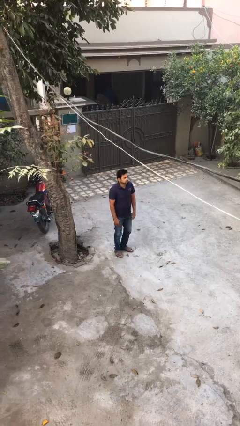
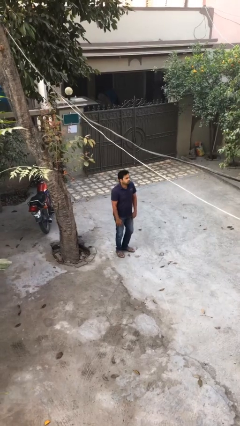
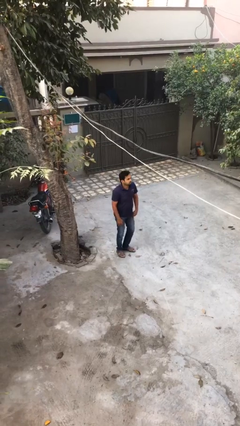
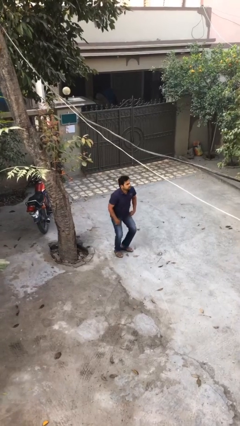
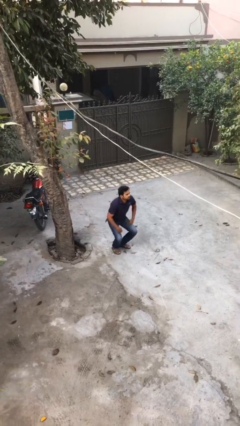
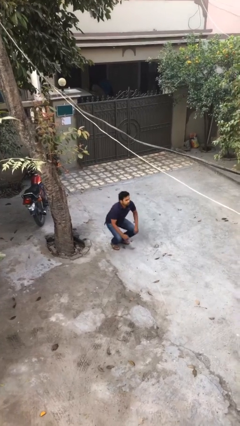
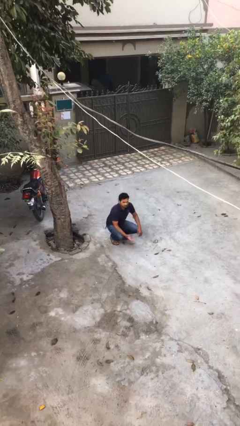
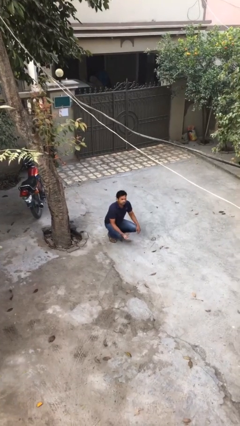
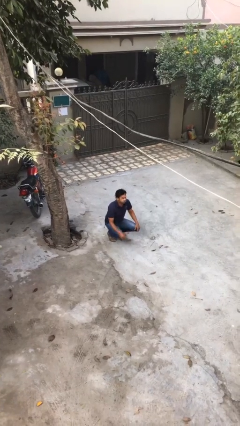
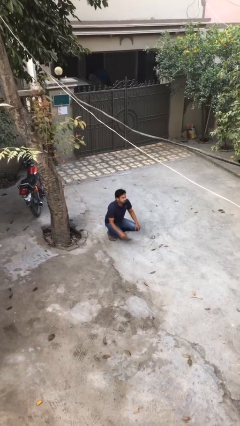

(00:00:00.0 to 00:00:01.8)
person sits down

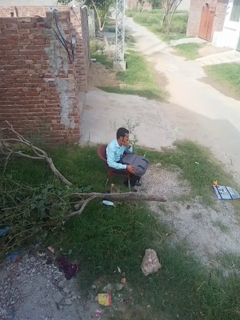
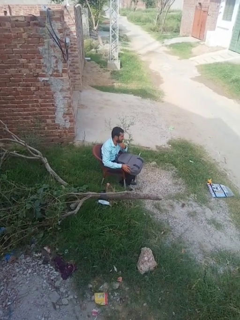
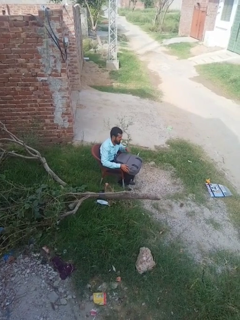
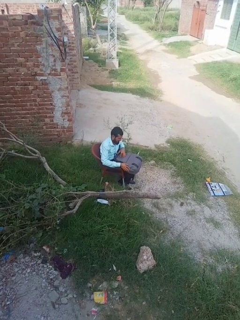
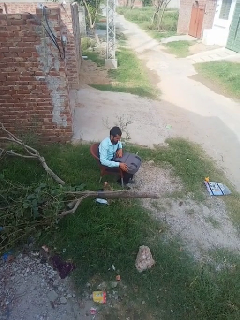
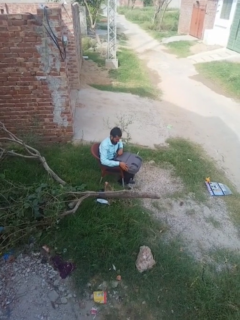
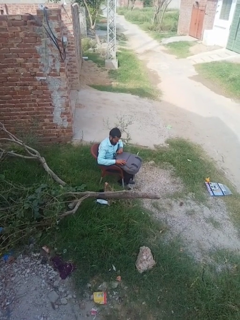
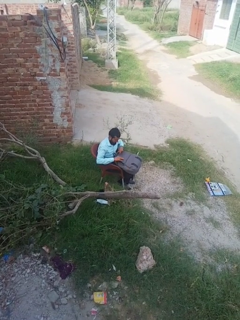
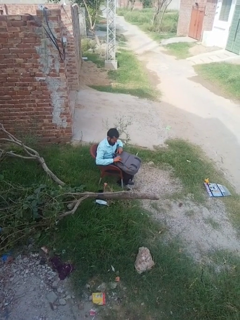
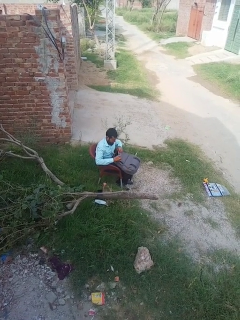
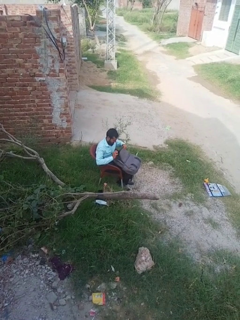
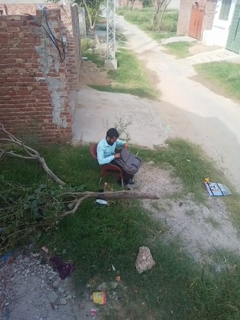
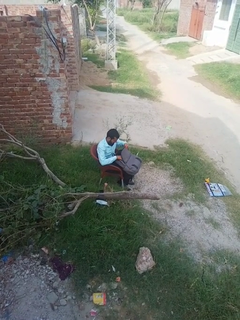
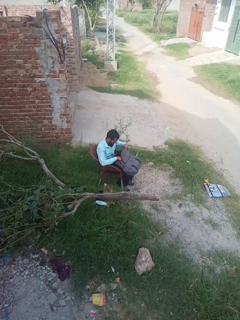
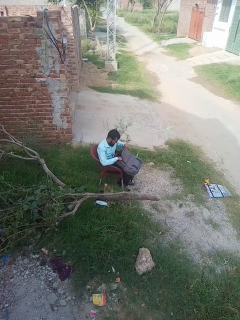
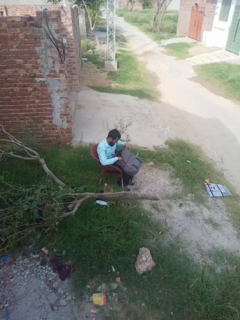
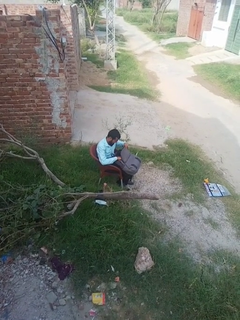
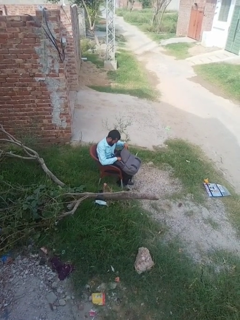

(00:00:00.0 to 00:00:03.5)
person searches in backpack

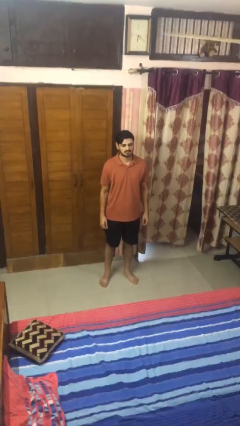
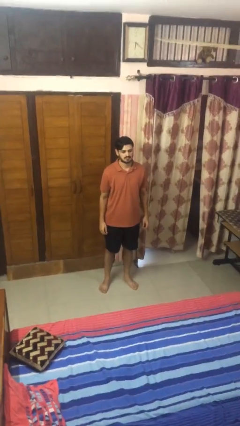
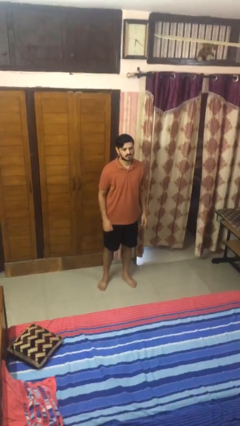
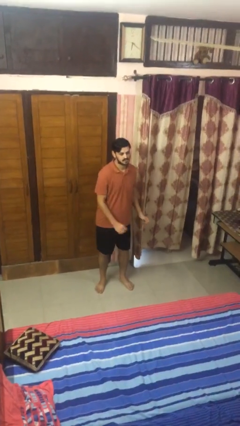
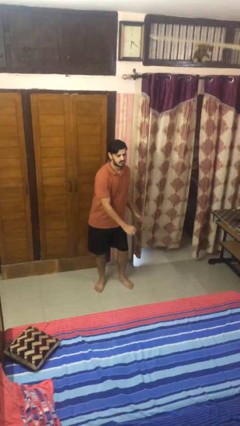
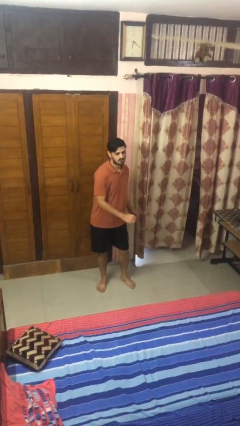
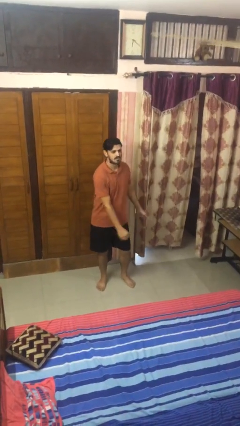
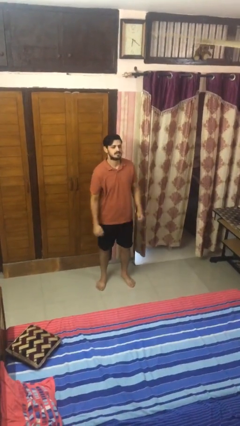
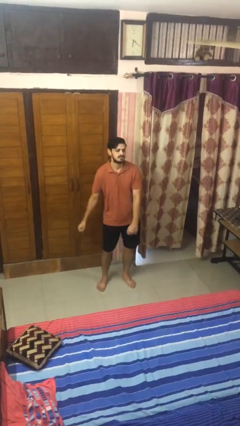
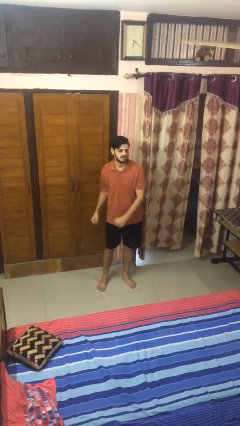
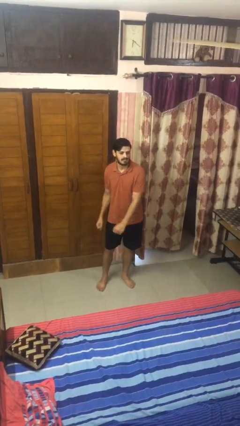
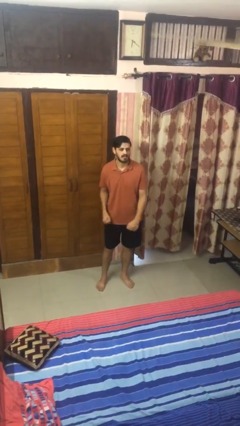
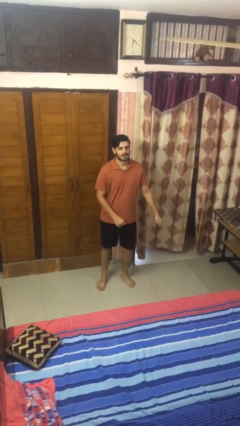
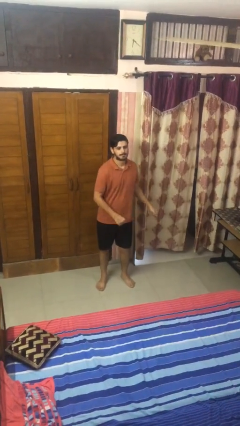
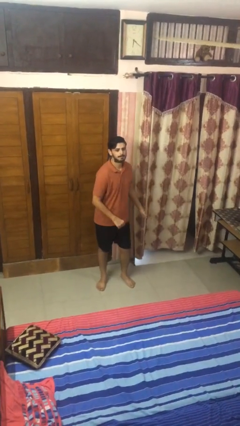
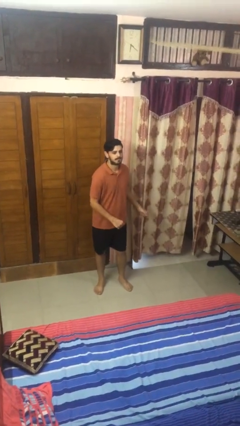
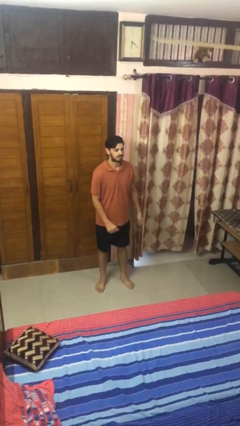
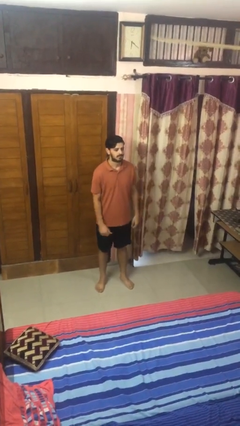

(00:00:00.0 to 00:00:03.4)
person dances in place

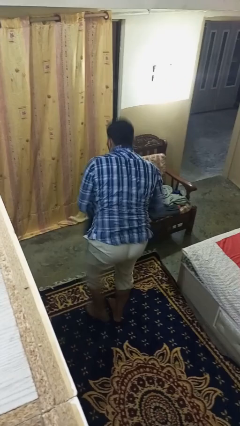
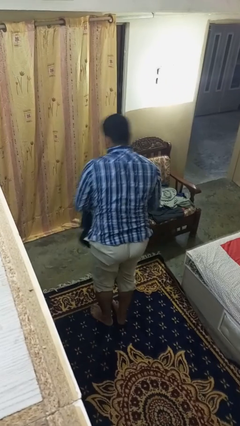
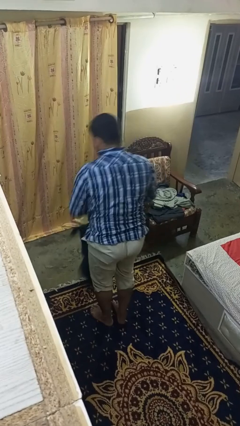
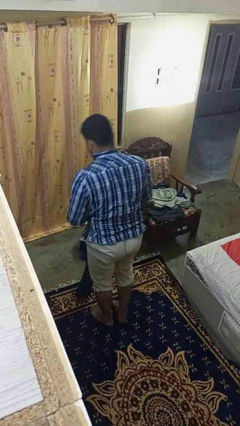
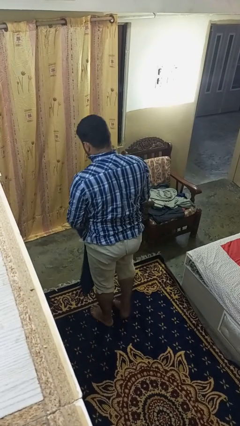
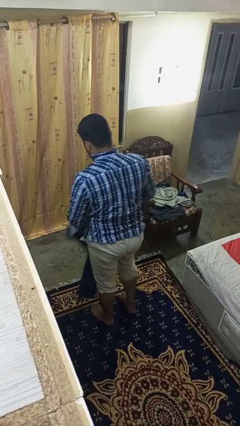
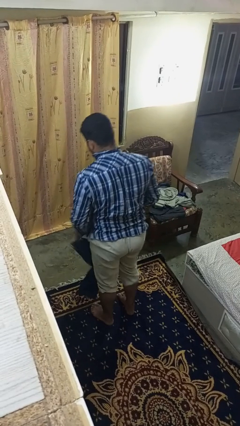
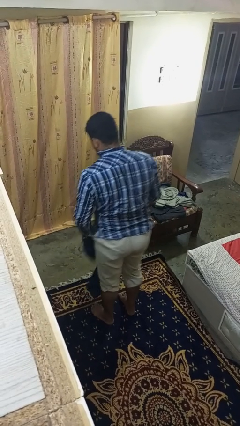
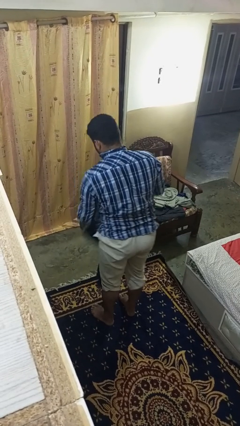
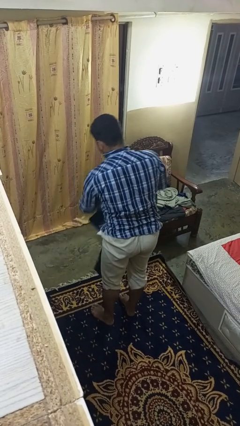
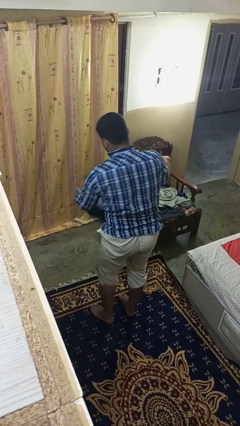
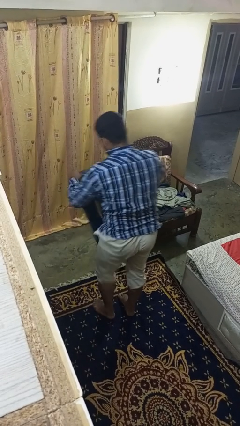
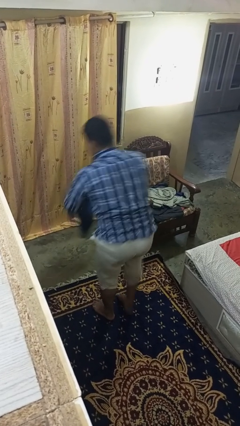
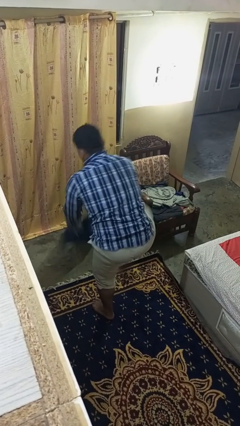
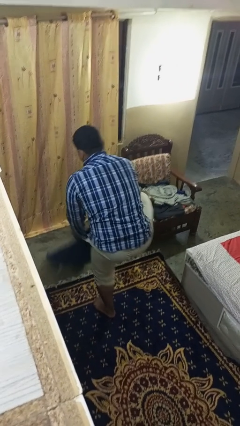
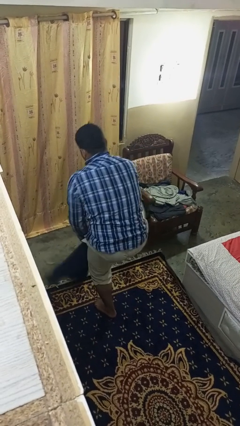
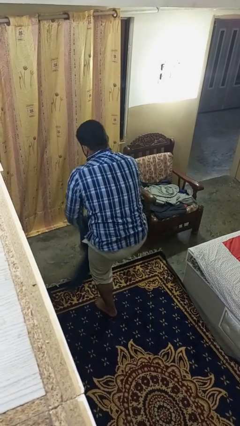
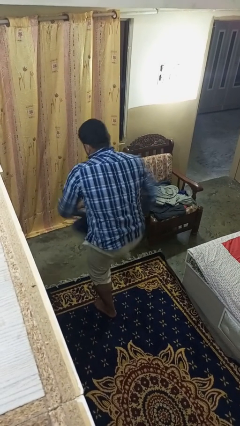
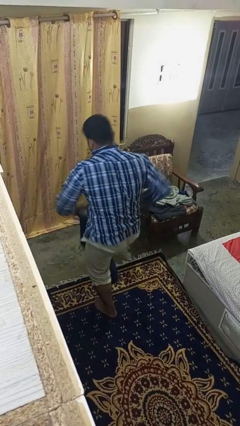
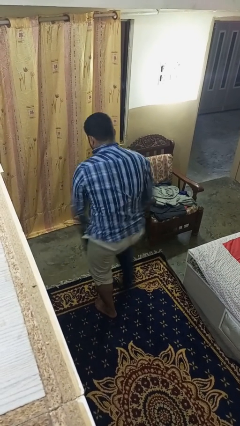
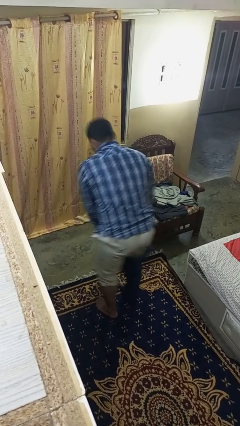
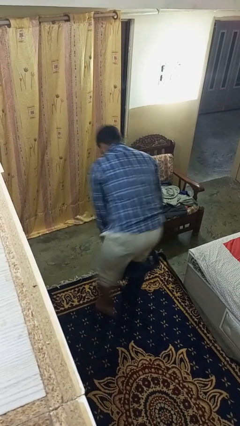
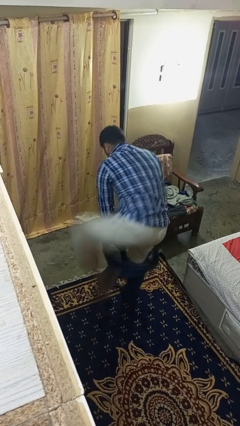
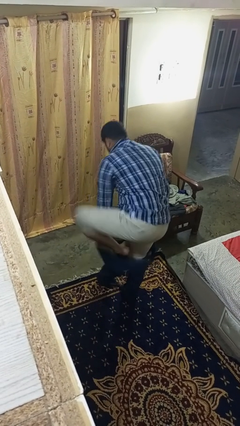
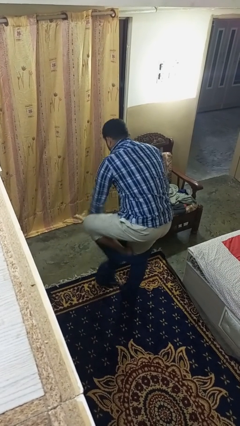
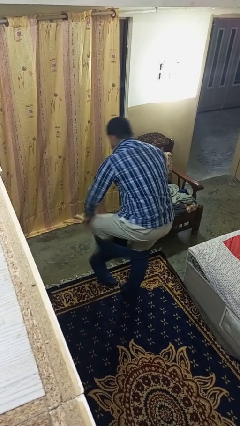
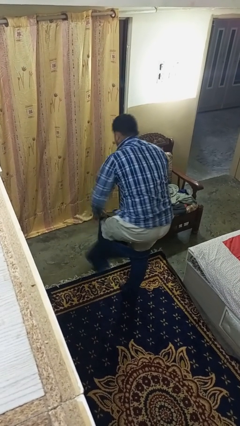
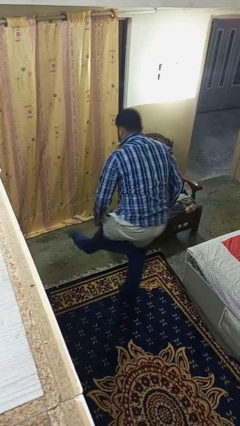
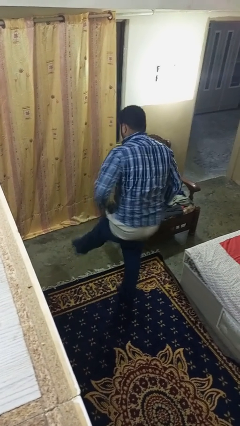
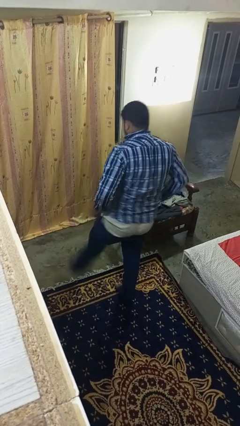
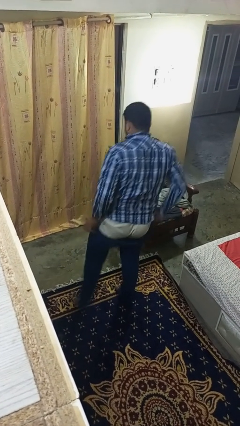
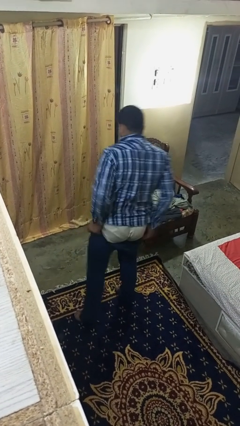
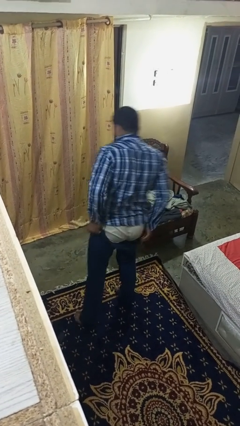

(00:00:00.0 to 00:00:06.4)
person puts on pants

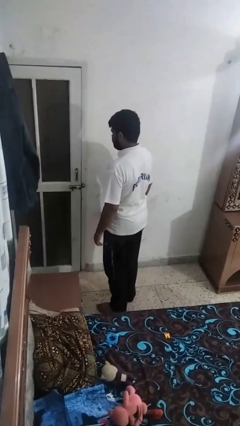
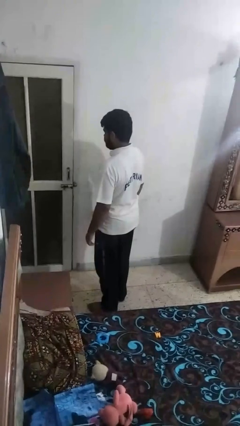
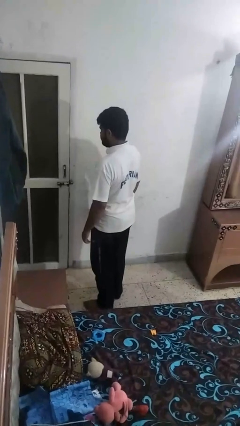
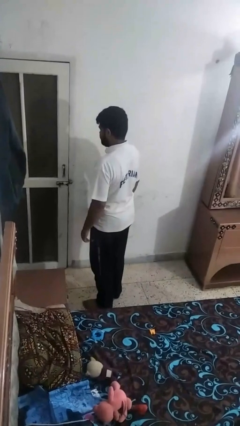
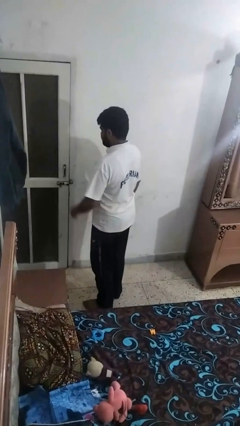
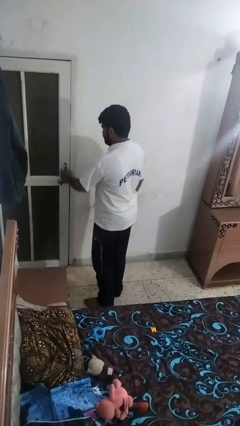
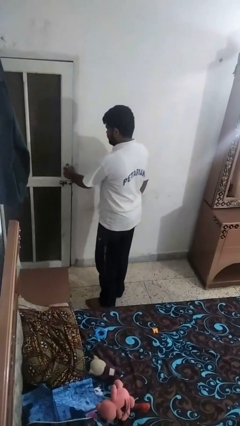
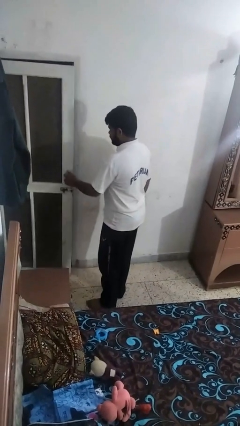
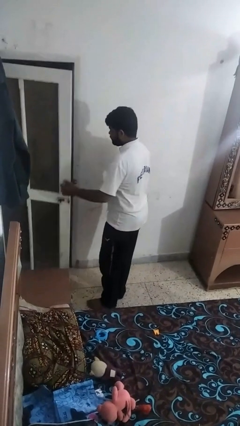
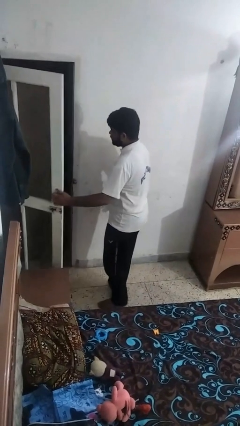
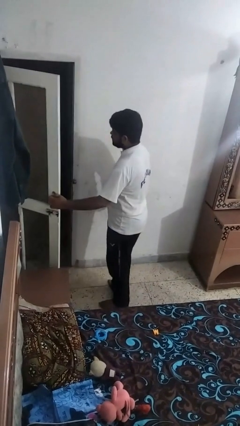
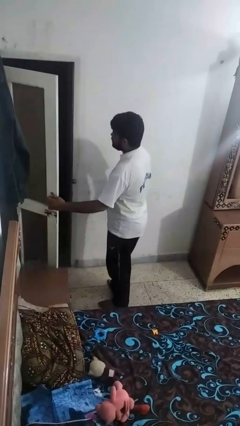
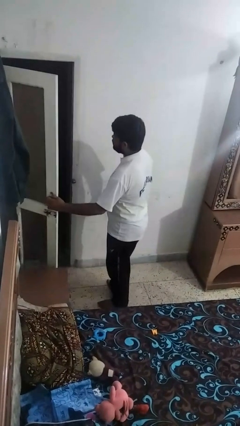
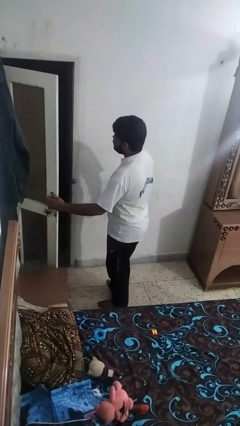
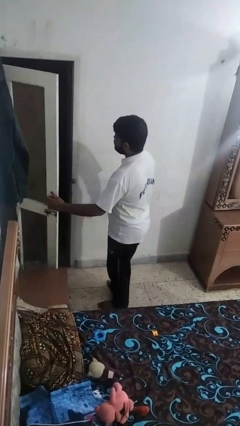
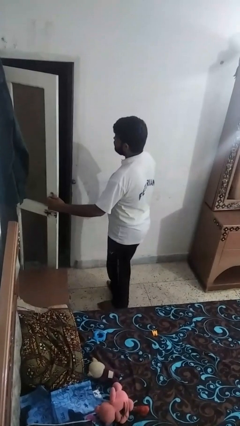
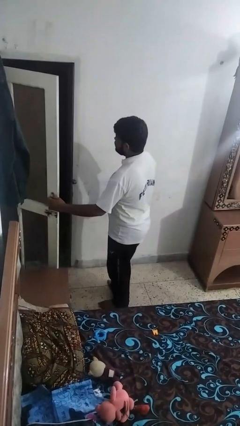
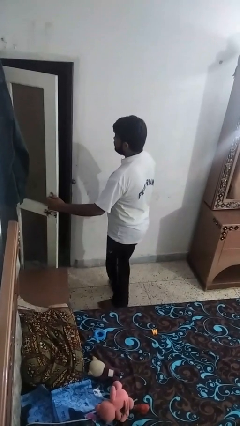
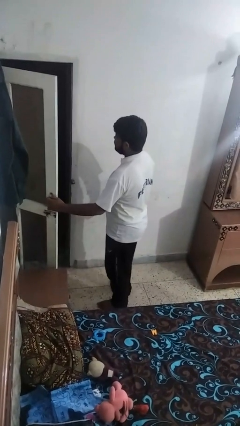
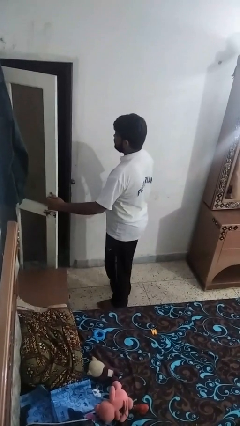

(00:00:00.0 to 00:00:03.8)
person opens gate
